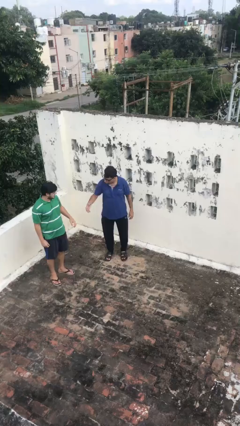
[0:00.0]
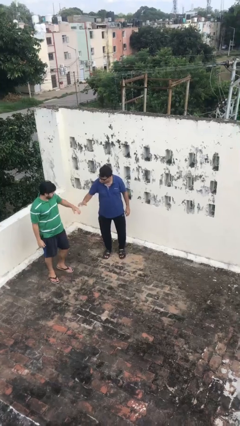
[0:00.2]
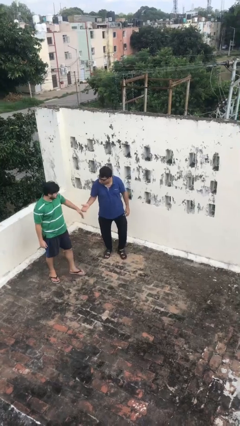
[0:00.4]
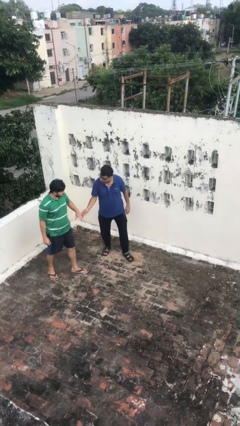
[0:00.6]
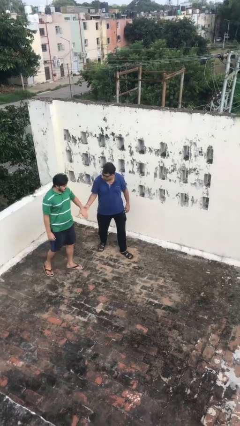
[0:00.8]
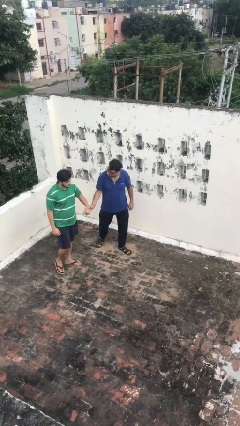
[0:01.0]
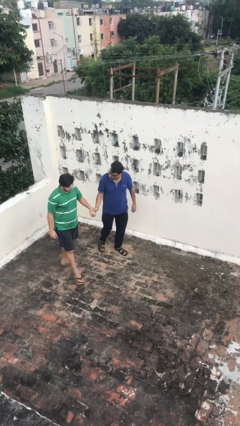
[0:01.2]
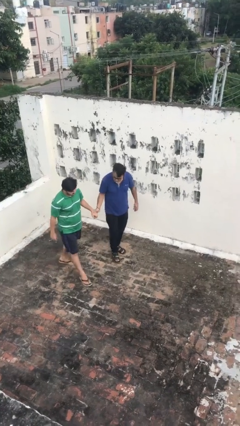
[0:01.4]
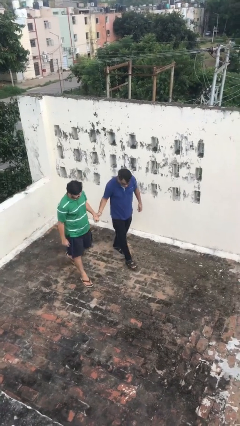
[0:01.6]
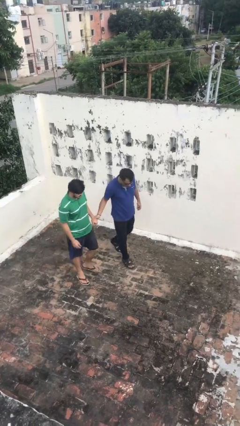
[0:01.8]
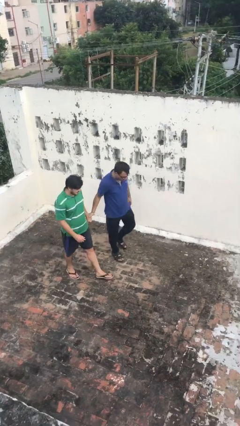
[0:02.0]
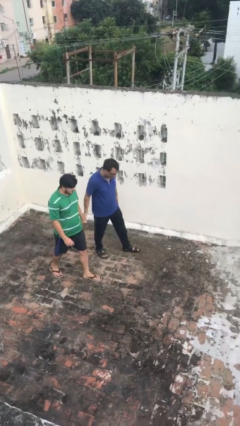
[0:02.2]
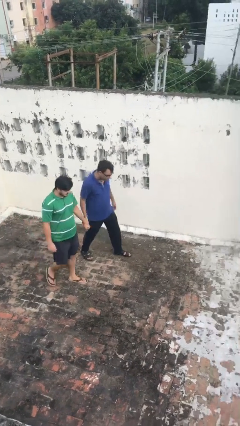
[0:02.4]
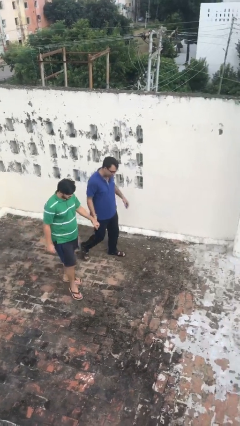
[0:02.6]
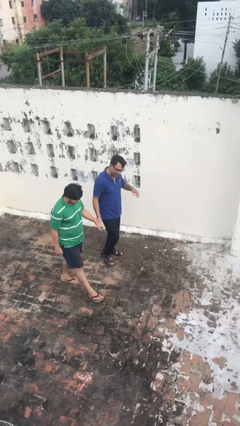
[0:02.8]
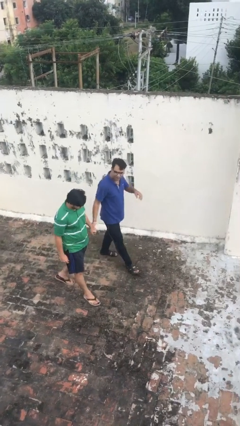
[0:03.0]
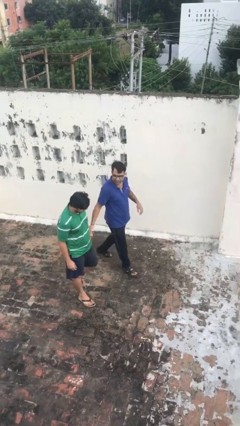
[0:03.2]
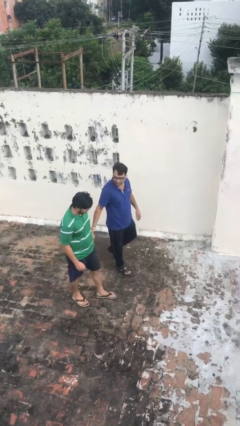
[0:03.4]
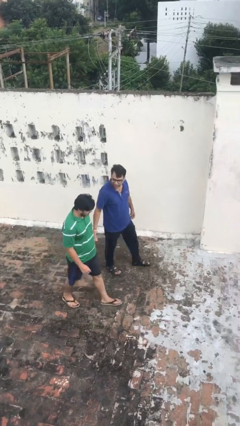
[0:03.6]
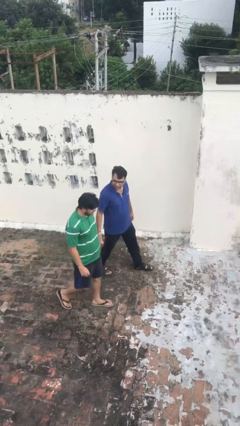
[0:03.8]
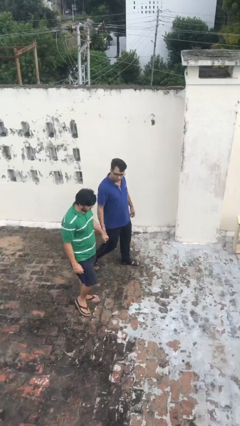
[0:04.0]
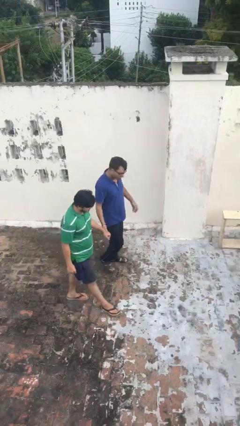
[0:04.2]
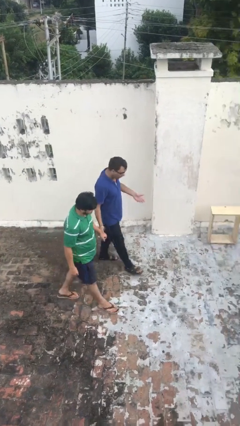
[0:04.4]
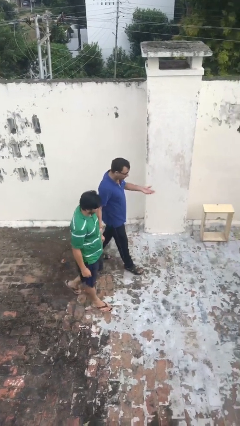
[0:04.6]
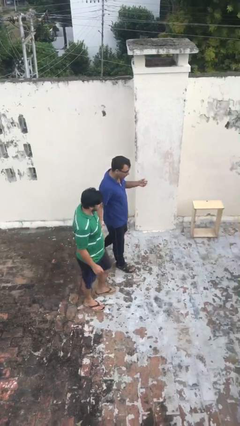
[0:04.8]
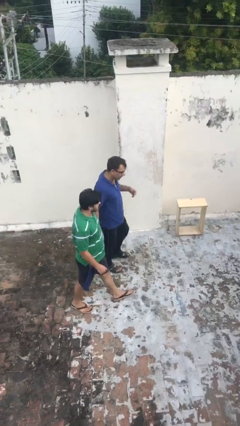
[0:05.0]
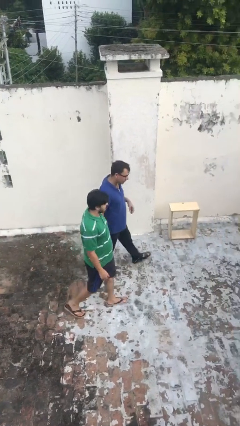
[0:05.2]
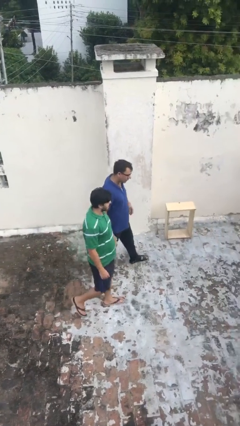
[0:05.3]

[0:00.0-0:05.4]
person holds hand

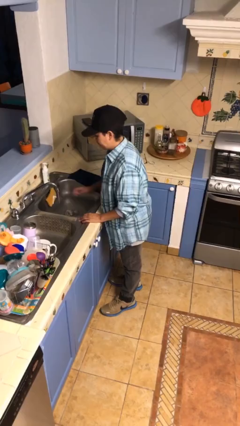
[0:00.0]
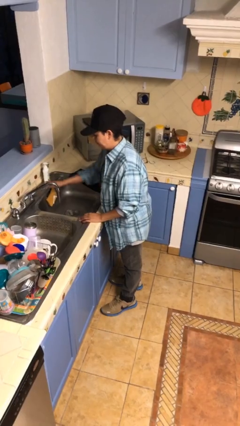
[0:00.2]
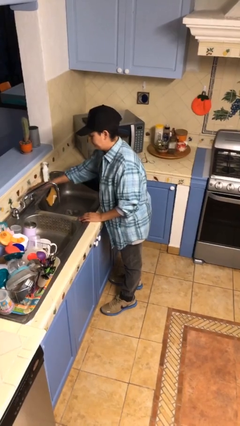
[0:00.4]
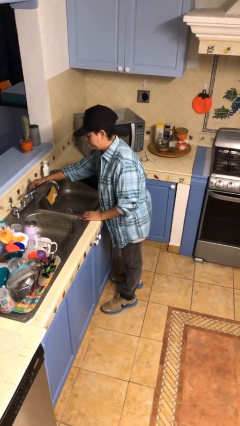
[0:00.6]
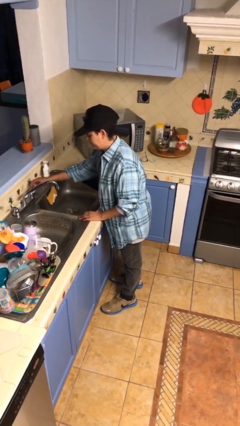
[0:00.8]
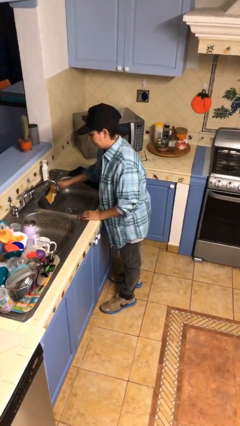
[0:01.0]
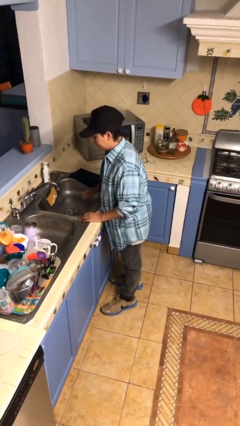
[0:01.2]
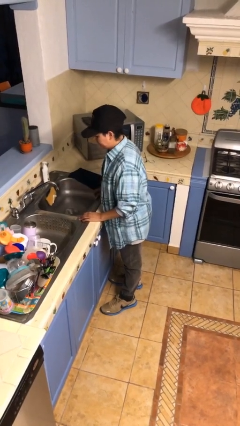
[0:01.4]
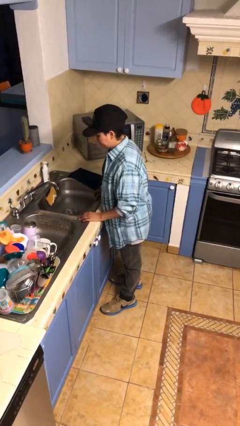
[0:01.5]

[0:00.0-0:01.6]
person turns off faucet

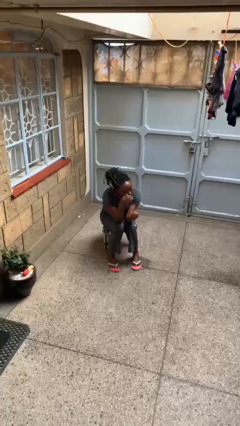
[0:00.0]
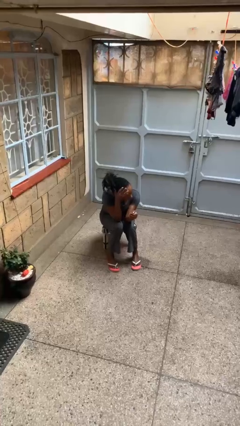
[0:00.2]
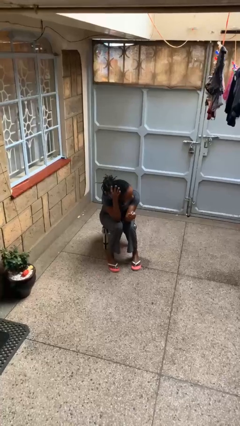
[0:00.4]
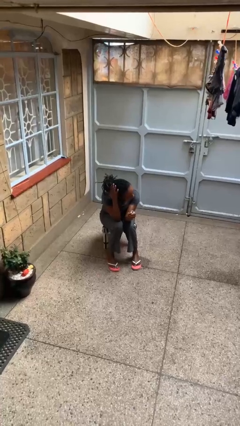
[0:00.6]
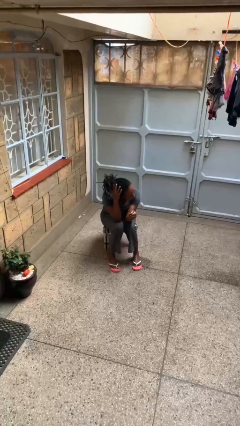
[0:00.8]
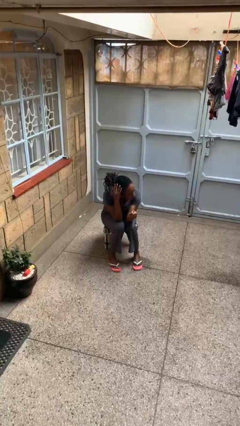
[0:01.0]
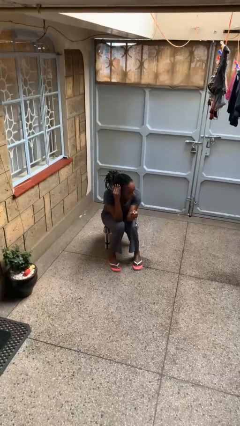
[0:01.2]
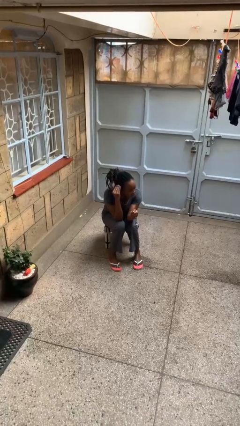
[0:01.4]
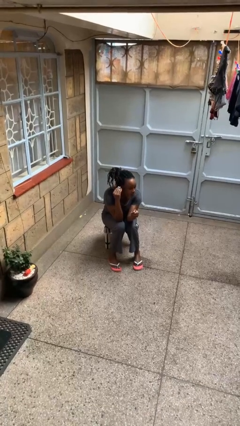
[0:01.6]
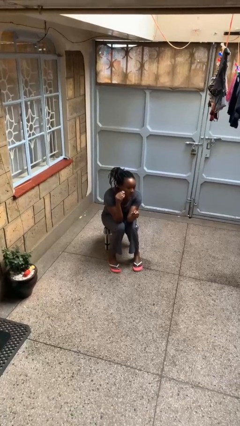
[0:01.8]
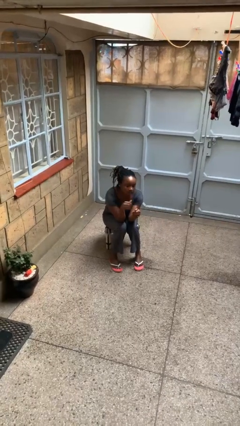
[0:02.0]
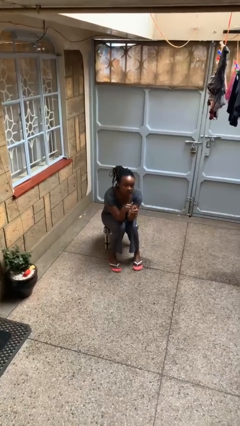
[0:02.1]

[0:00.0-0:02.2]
person strokes hair

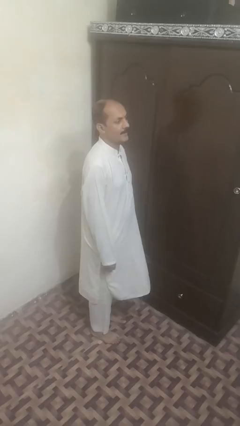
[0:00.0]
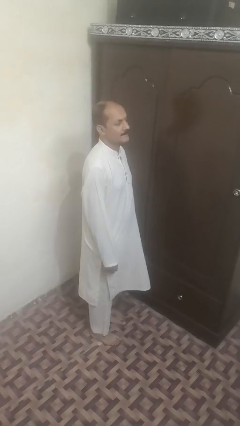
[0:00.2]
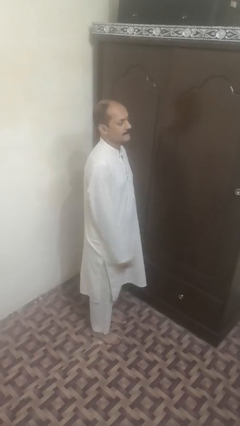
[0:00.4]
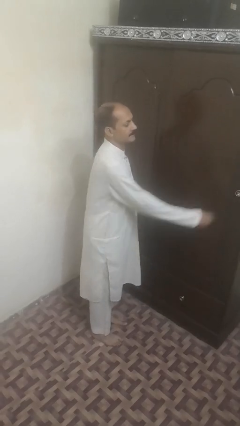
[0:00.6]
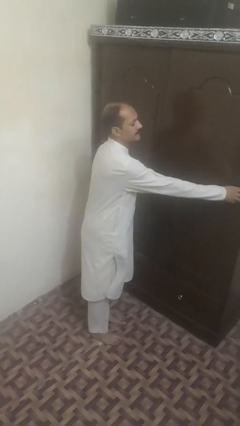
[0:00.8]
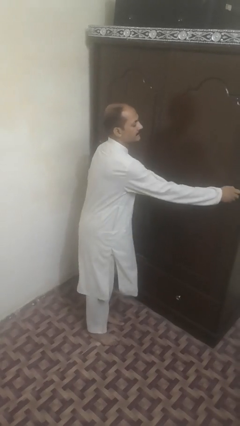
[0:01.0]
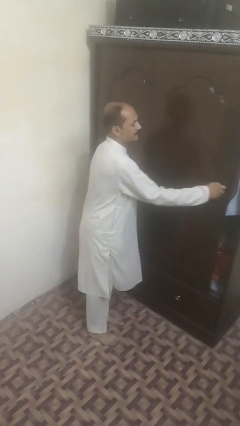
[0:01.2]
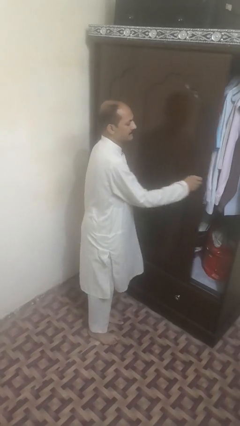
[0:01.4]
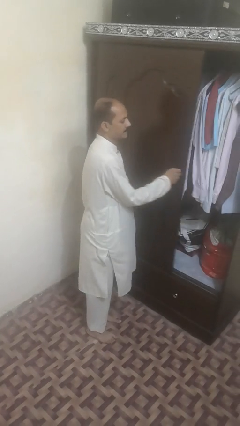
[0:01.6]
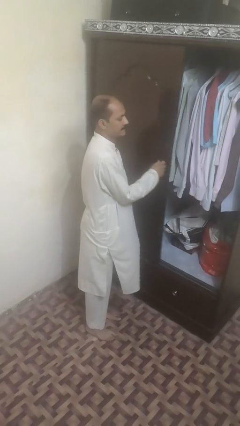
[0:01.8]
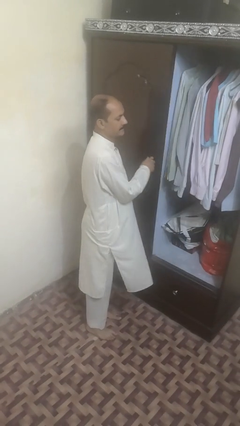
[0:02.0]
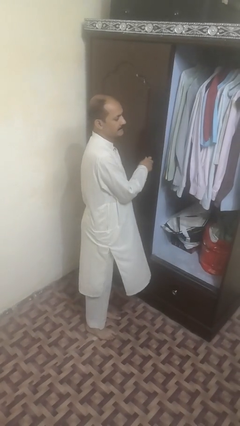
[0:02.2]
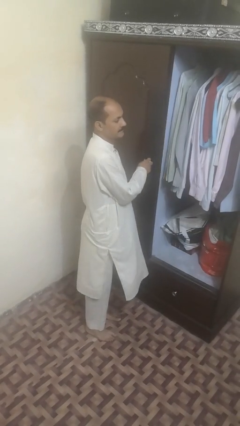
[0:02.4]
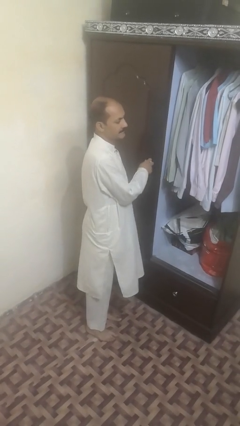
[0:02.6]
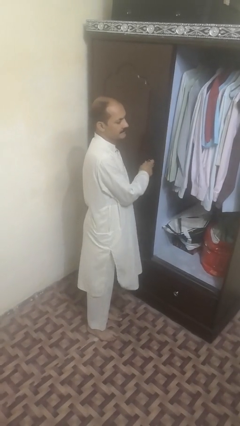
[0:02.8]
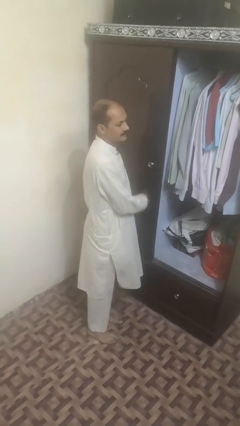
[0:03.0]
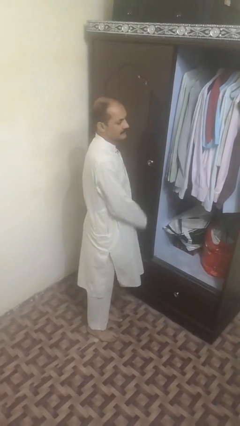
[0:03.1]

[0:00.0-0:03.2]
person opens sliding door

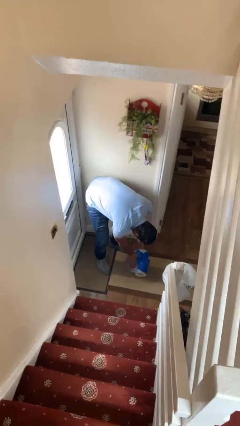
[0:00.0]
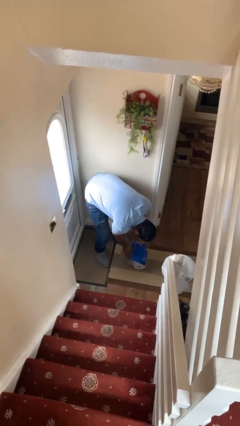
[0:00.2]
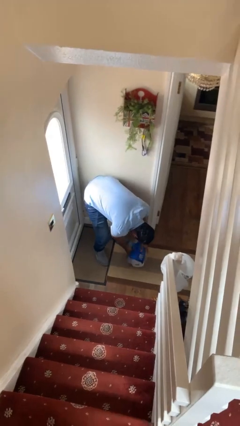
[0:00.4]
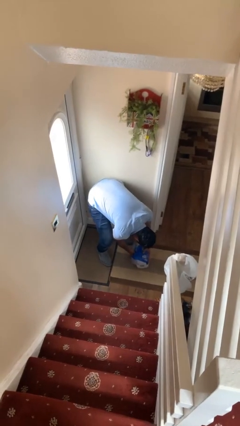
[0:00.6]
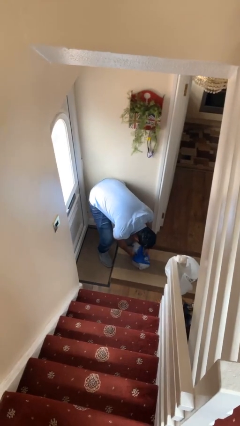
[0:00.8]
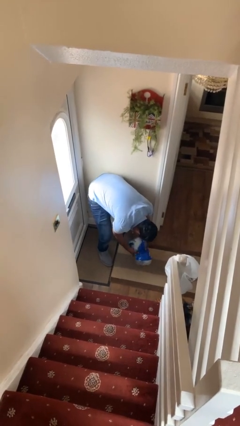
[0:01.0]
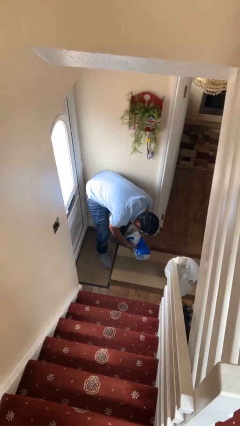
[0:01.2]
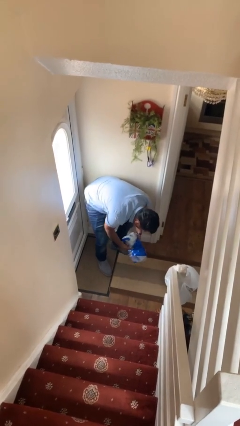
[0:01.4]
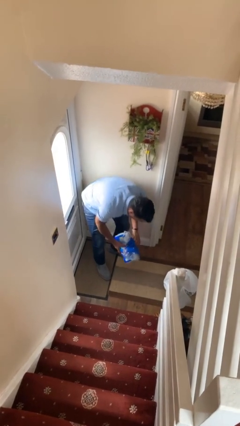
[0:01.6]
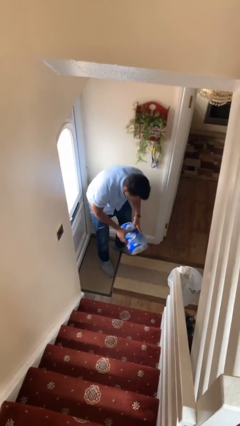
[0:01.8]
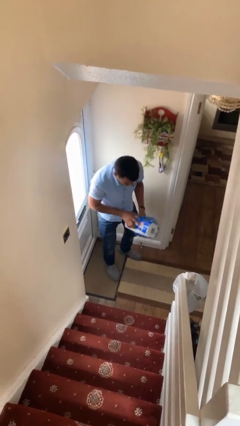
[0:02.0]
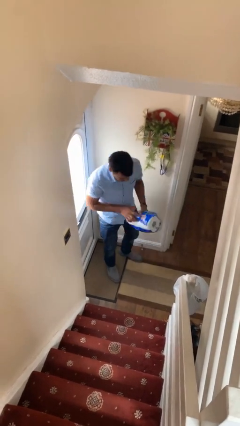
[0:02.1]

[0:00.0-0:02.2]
person picks up object from floor

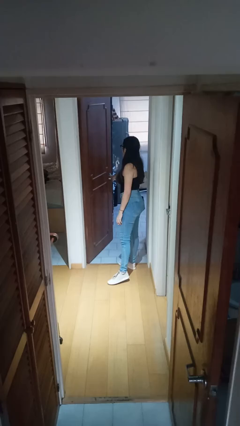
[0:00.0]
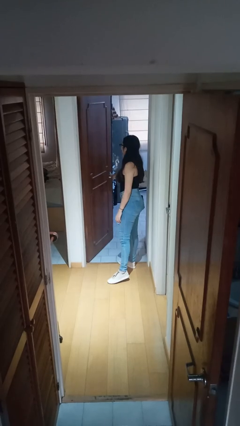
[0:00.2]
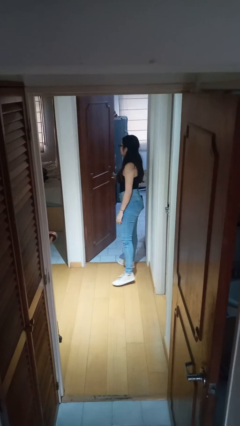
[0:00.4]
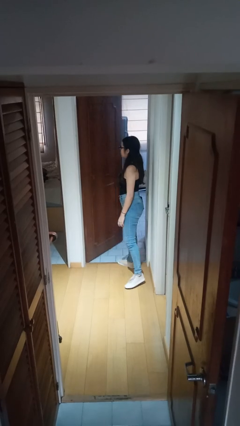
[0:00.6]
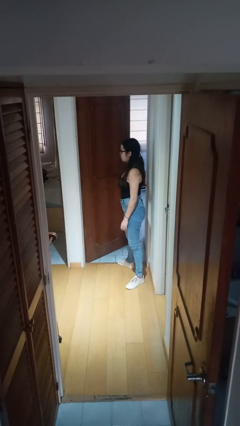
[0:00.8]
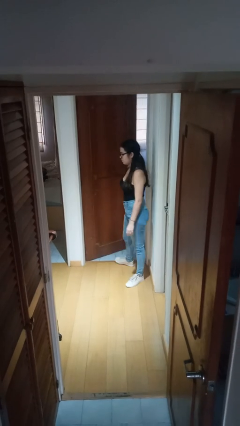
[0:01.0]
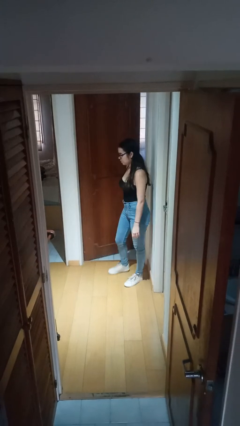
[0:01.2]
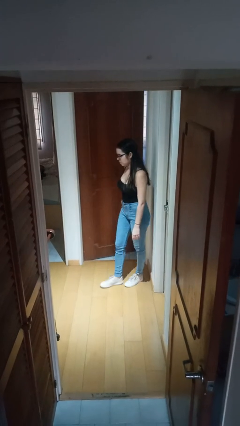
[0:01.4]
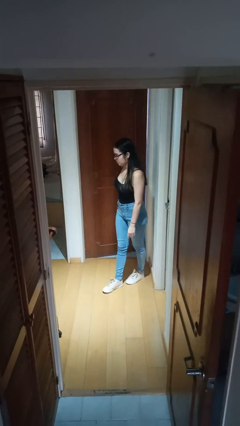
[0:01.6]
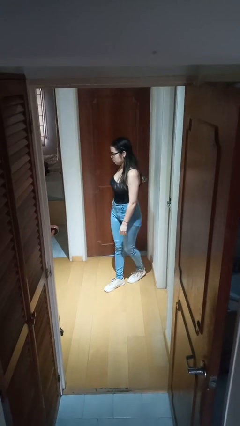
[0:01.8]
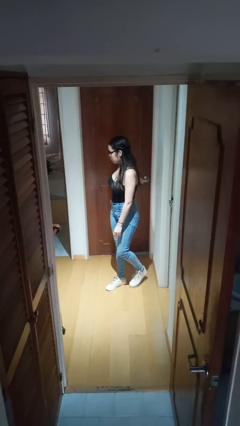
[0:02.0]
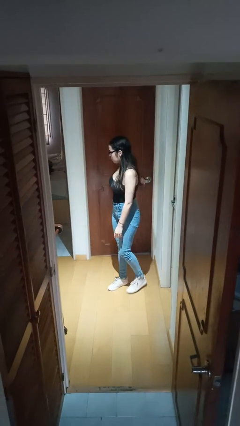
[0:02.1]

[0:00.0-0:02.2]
person closes facility door
